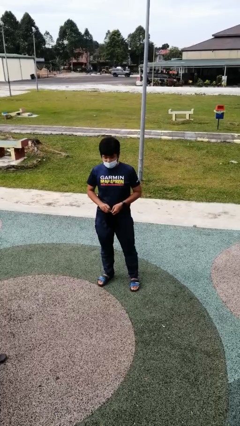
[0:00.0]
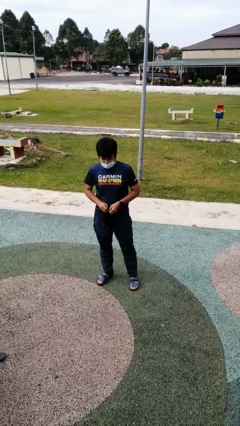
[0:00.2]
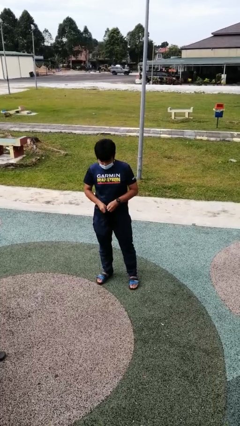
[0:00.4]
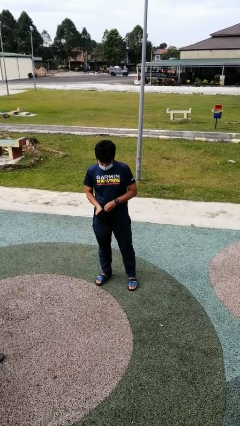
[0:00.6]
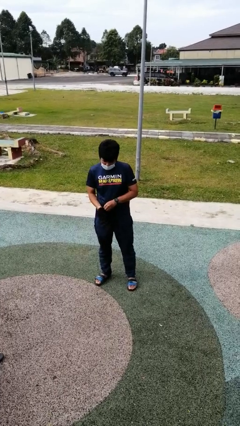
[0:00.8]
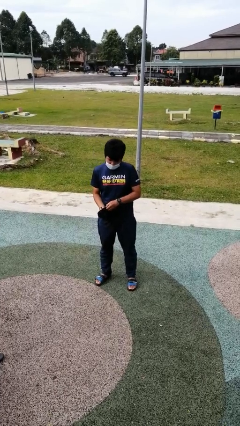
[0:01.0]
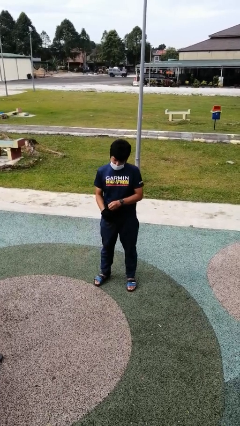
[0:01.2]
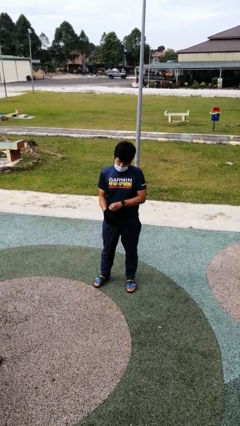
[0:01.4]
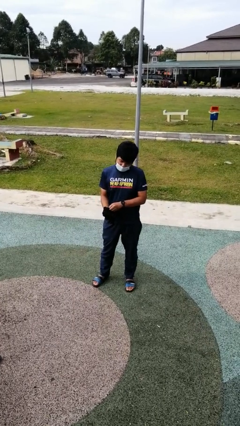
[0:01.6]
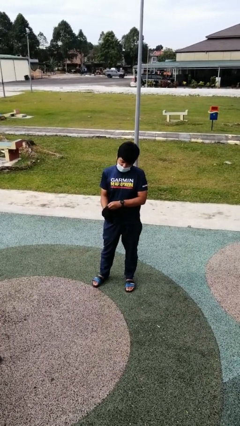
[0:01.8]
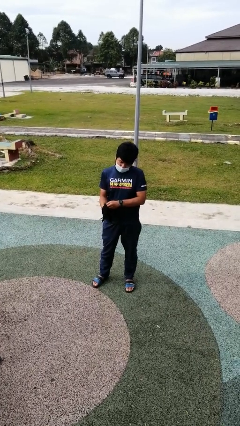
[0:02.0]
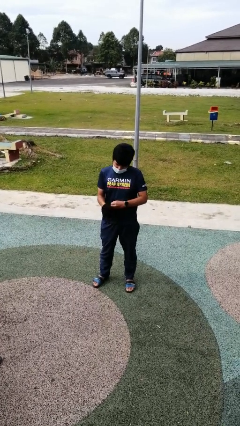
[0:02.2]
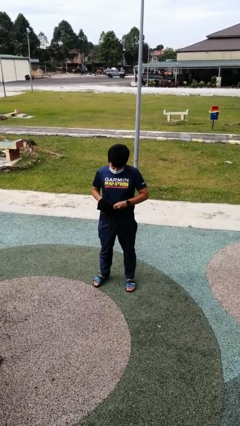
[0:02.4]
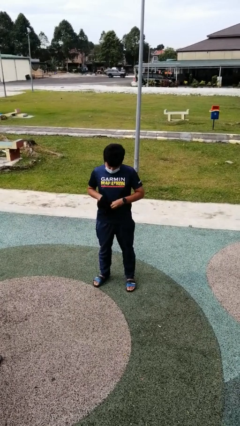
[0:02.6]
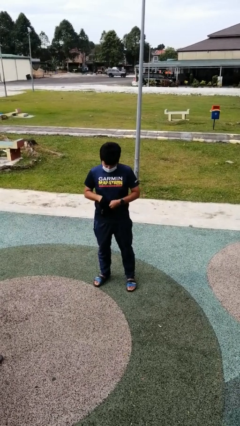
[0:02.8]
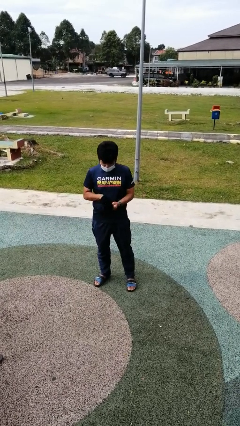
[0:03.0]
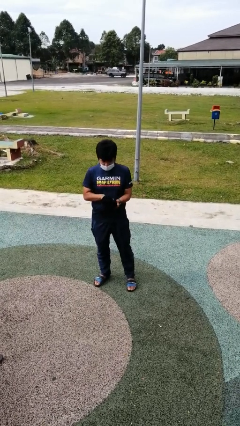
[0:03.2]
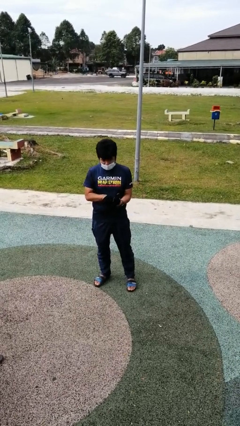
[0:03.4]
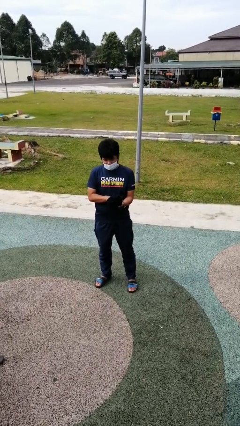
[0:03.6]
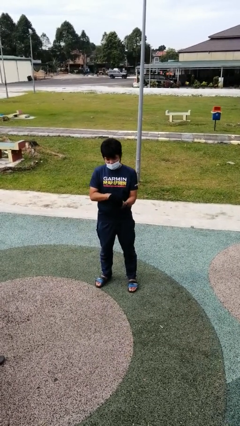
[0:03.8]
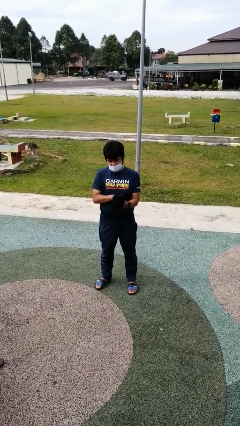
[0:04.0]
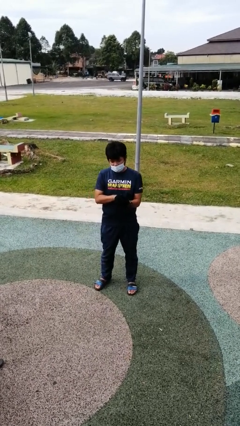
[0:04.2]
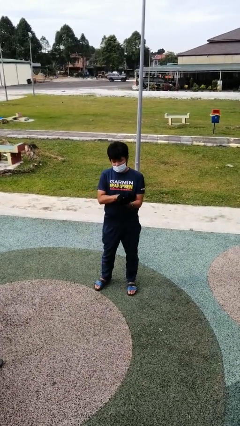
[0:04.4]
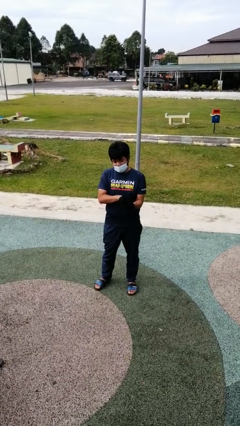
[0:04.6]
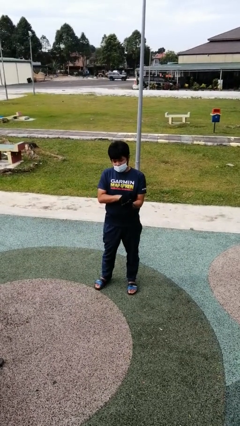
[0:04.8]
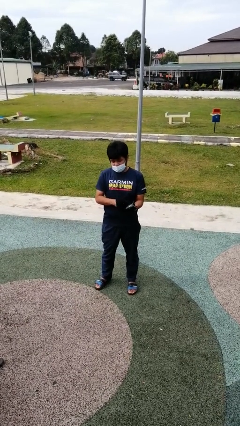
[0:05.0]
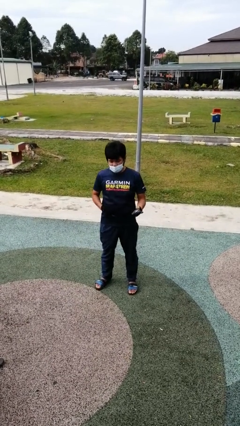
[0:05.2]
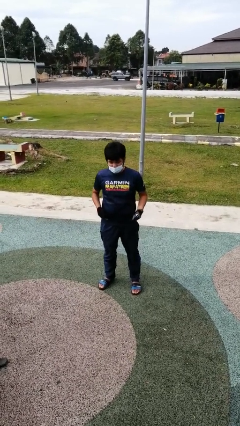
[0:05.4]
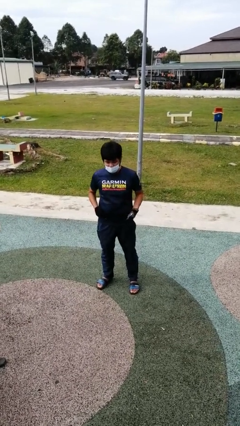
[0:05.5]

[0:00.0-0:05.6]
person puts on gloves

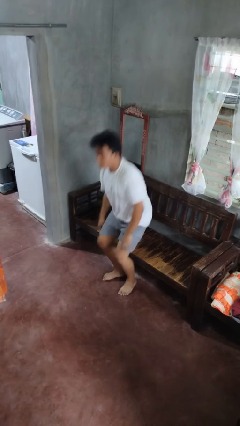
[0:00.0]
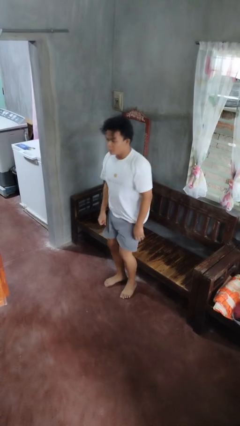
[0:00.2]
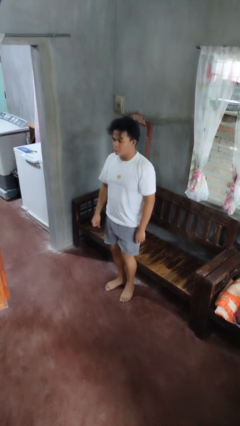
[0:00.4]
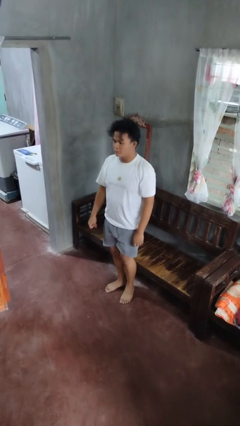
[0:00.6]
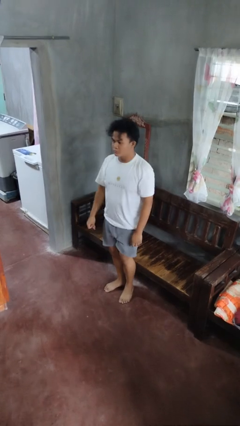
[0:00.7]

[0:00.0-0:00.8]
person stands up

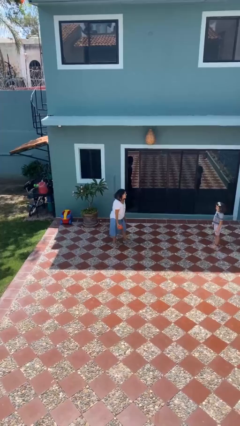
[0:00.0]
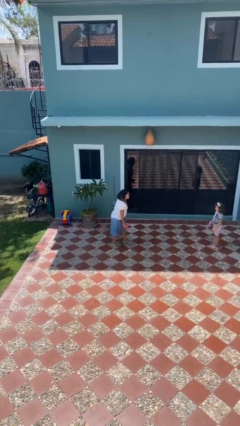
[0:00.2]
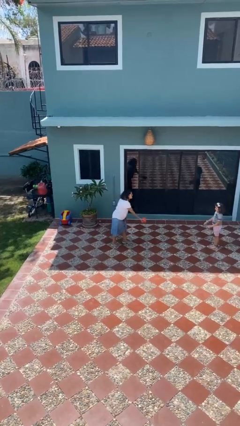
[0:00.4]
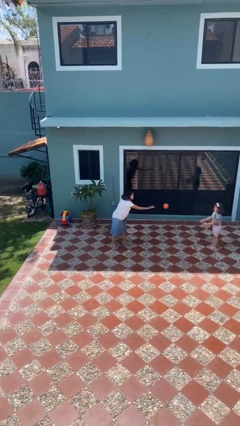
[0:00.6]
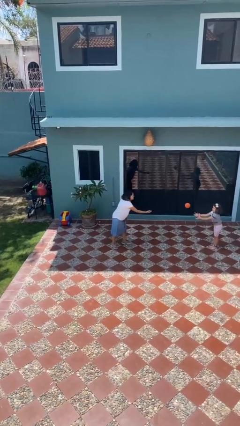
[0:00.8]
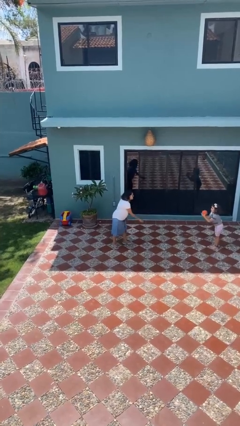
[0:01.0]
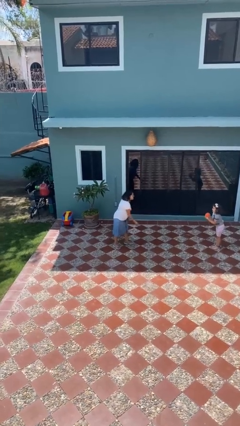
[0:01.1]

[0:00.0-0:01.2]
person throws object to person

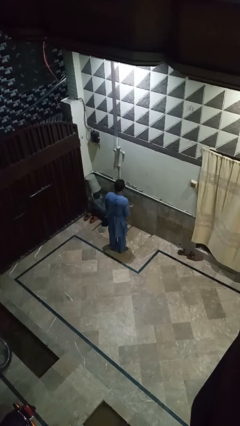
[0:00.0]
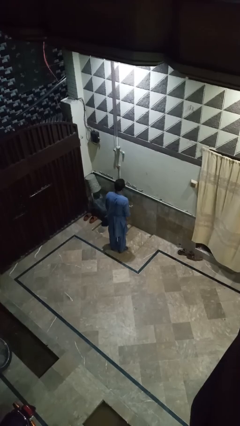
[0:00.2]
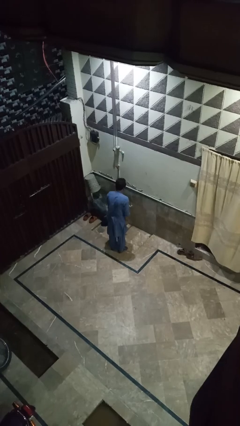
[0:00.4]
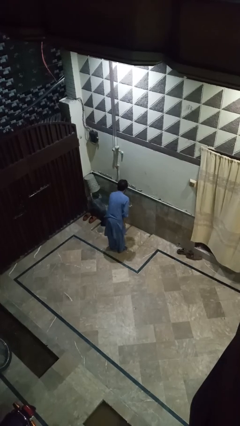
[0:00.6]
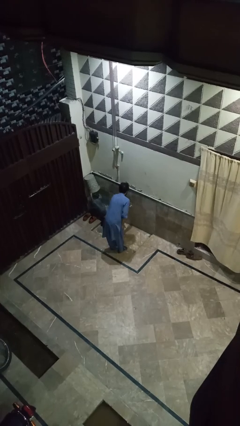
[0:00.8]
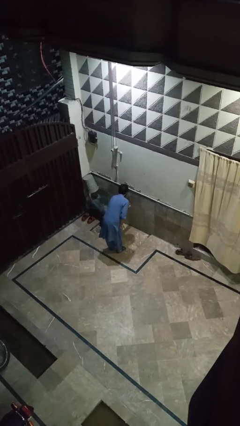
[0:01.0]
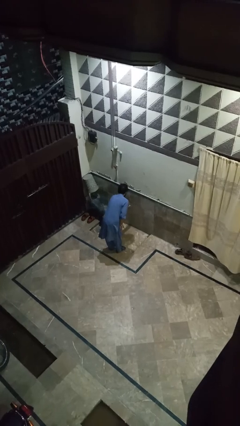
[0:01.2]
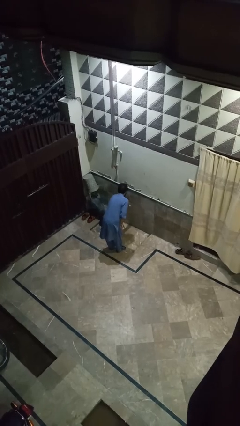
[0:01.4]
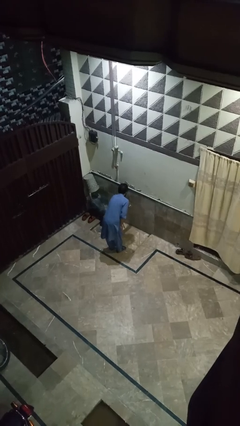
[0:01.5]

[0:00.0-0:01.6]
person turns on faucet

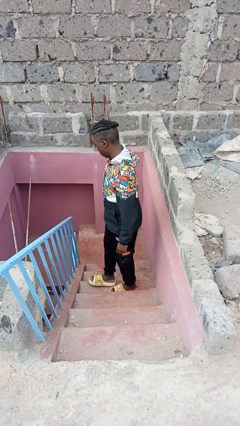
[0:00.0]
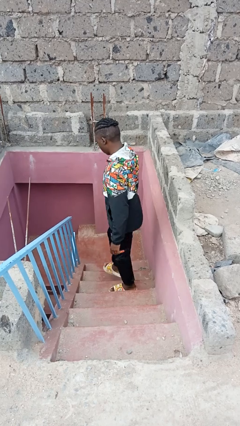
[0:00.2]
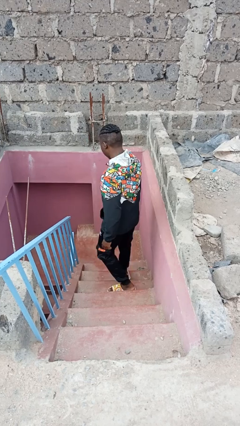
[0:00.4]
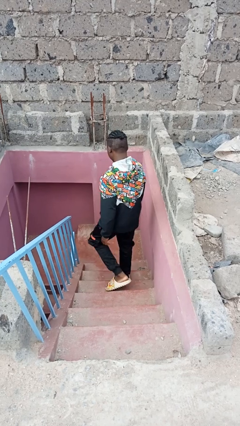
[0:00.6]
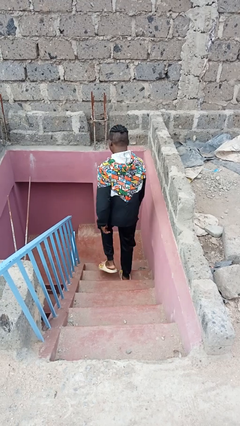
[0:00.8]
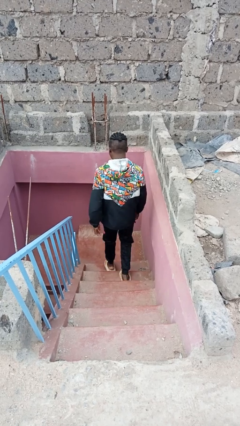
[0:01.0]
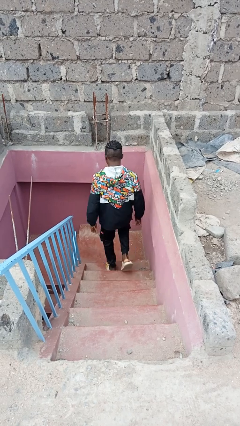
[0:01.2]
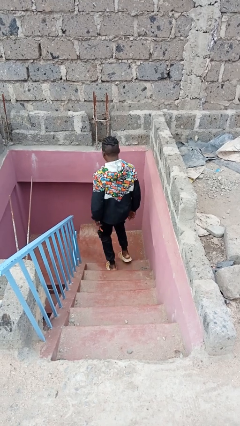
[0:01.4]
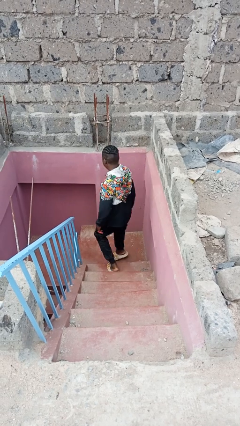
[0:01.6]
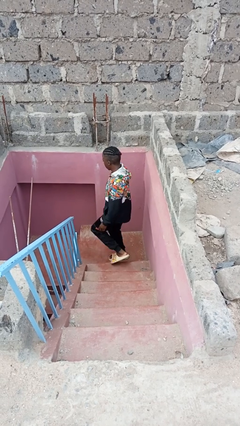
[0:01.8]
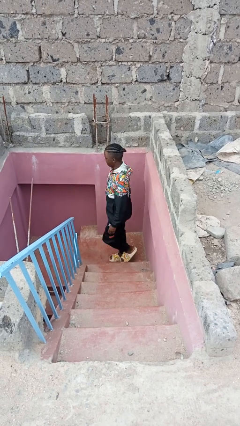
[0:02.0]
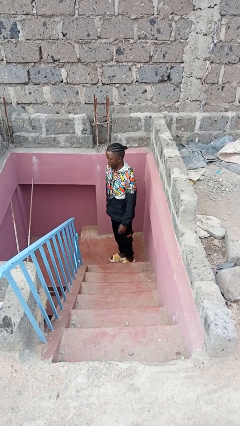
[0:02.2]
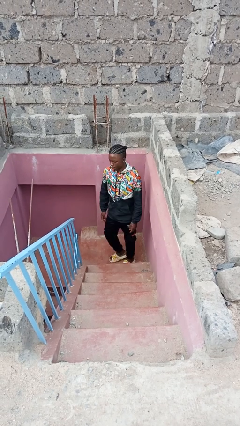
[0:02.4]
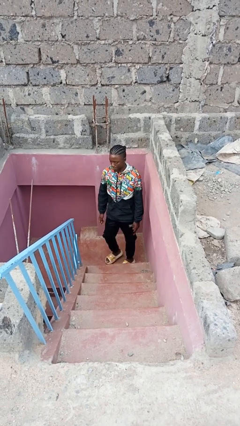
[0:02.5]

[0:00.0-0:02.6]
person climbs down stairs

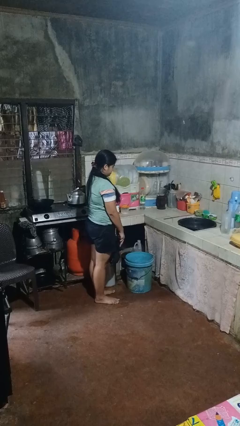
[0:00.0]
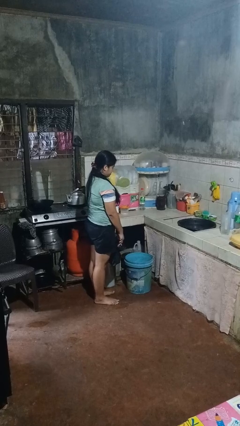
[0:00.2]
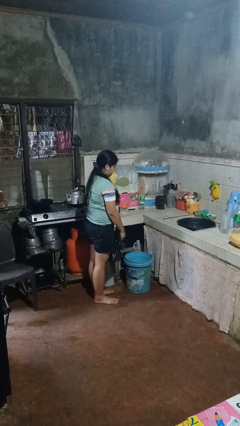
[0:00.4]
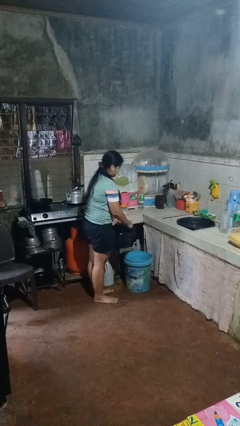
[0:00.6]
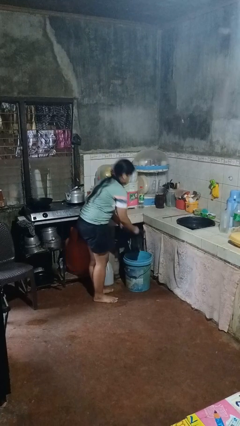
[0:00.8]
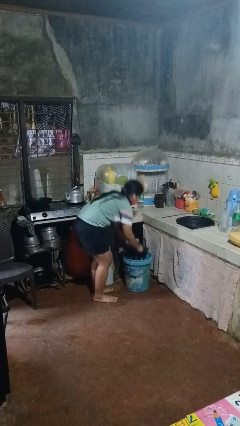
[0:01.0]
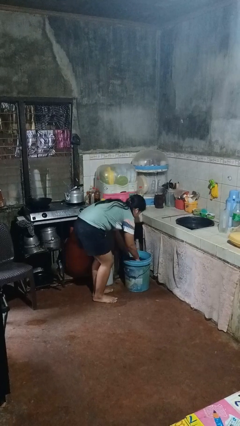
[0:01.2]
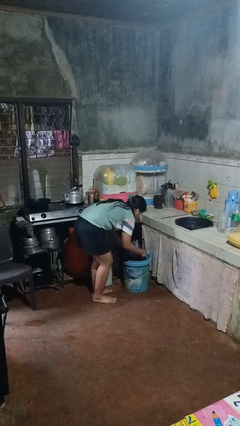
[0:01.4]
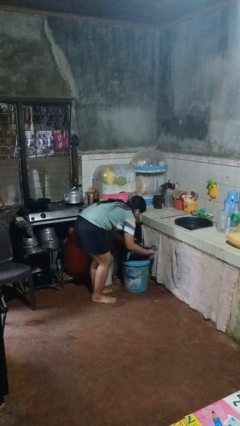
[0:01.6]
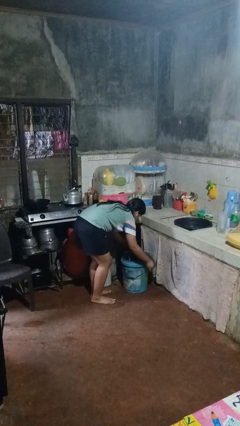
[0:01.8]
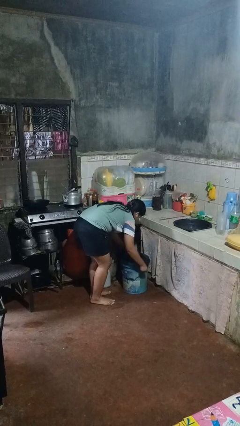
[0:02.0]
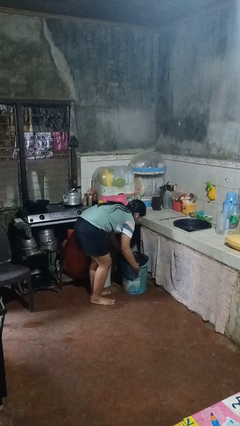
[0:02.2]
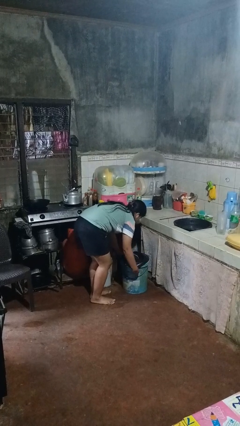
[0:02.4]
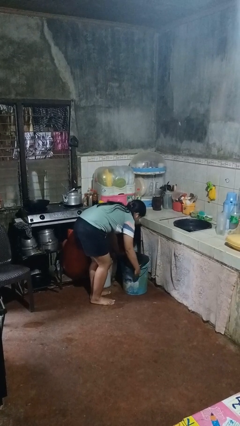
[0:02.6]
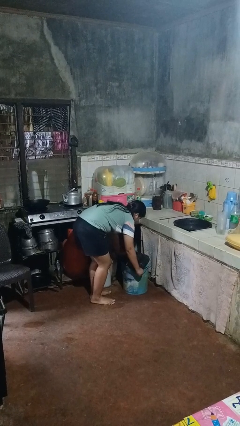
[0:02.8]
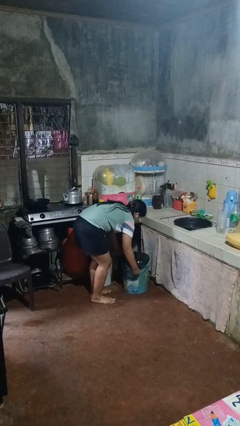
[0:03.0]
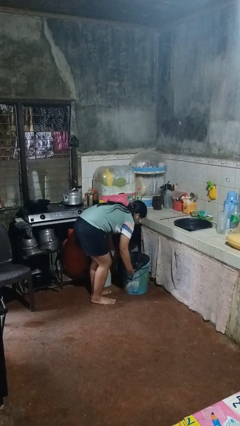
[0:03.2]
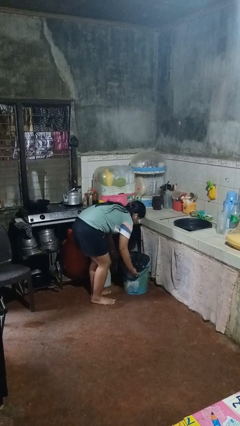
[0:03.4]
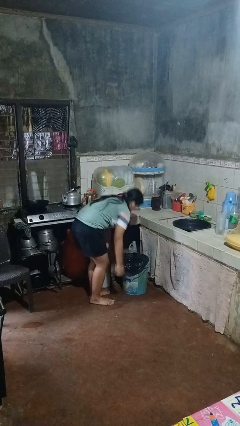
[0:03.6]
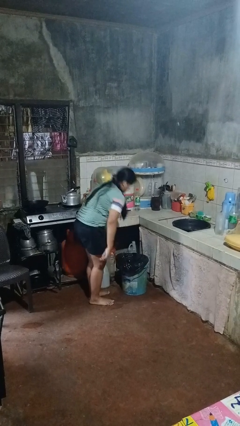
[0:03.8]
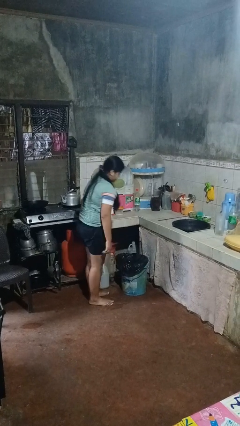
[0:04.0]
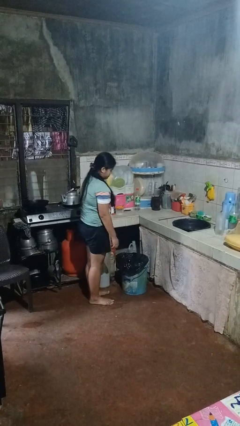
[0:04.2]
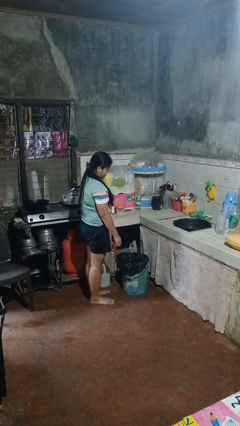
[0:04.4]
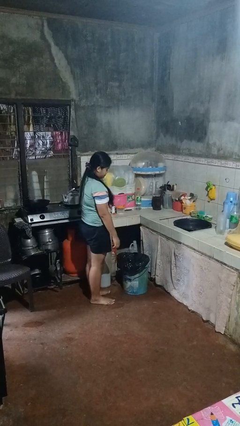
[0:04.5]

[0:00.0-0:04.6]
person inserts trashbag into trashcan

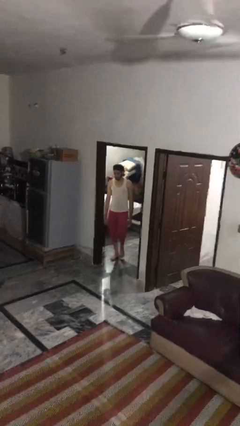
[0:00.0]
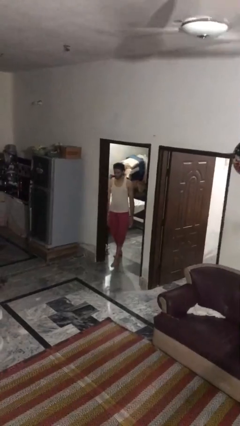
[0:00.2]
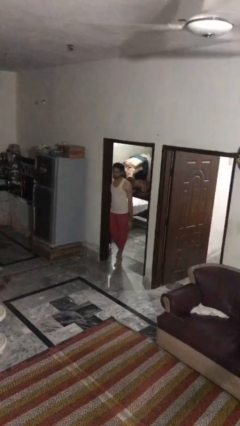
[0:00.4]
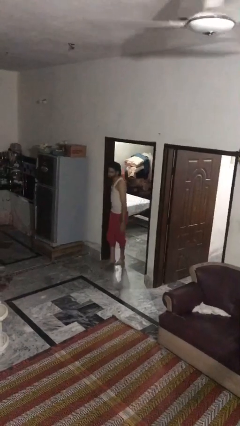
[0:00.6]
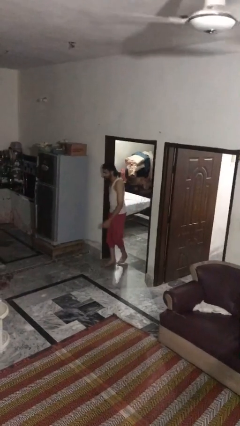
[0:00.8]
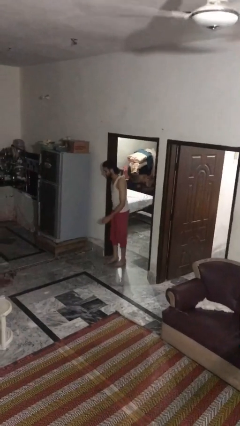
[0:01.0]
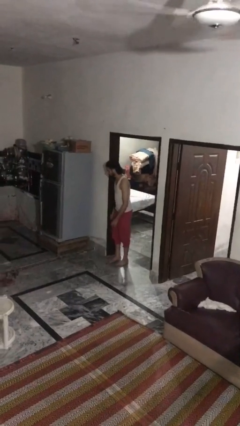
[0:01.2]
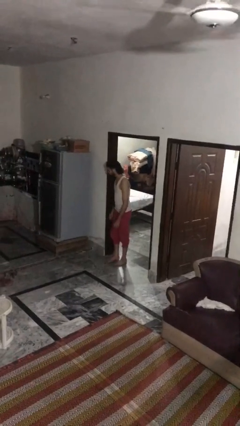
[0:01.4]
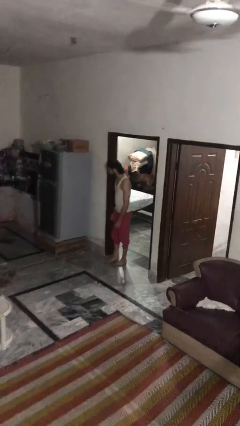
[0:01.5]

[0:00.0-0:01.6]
person bumps into wall
